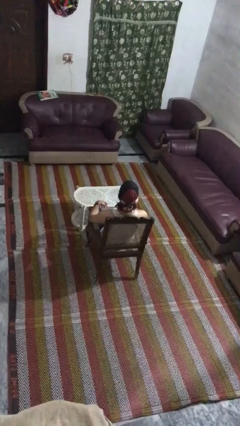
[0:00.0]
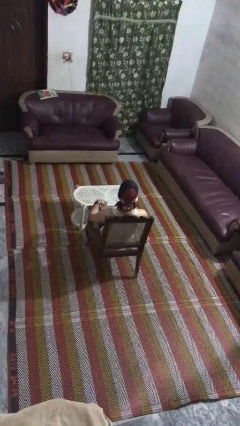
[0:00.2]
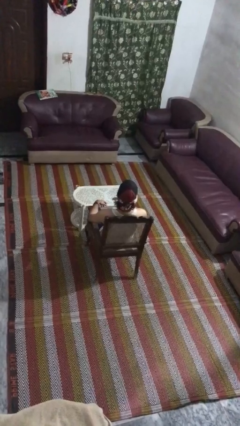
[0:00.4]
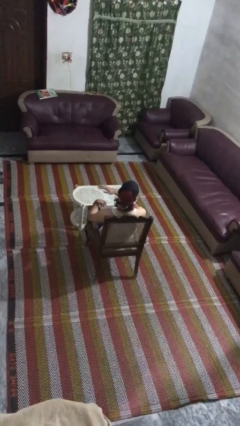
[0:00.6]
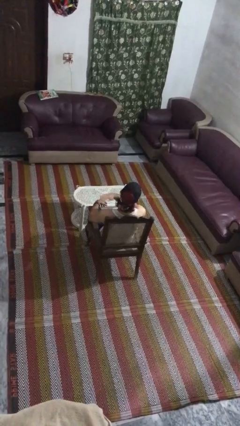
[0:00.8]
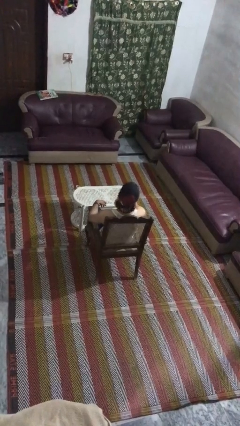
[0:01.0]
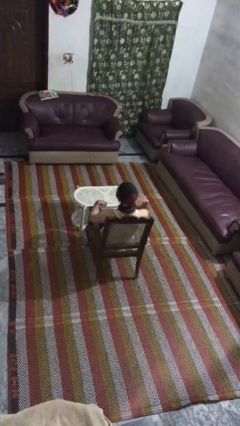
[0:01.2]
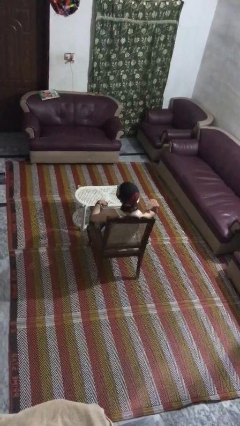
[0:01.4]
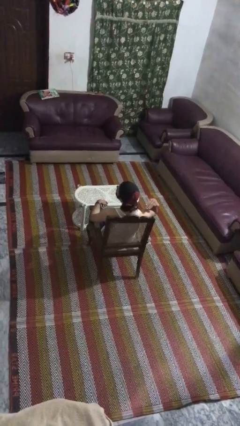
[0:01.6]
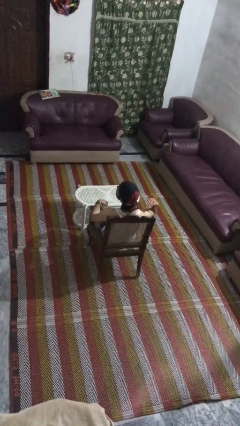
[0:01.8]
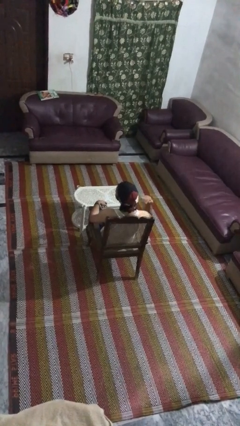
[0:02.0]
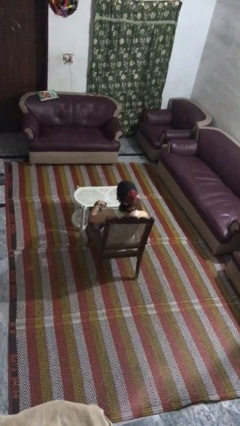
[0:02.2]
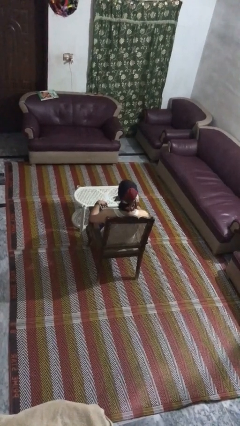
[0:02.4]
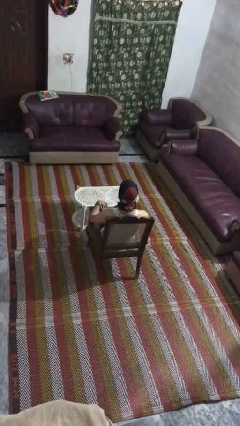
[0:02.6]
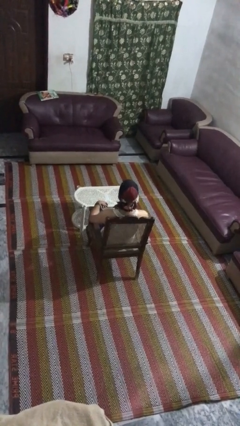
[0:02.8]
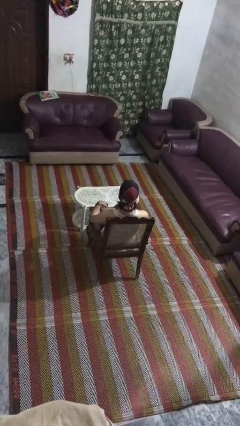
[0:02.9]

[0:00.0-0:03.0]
person gestures cut

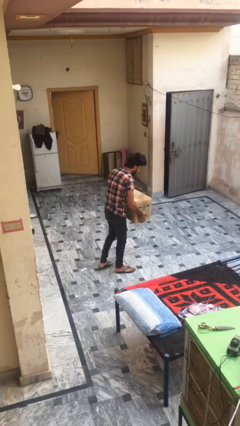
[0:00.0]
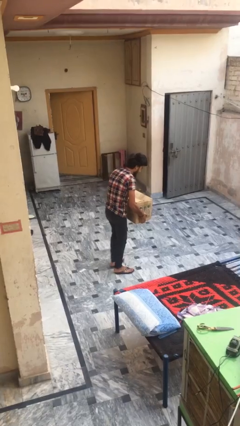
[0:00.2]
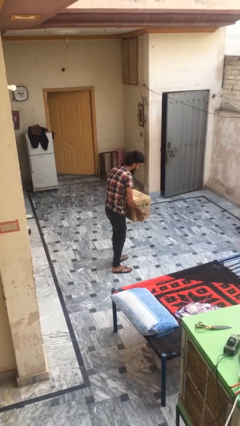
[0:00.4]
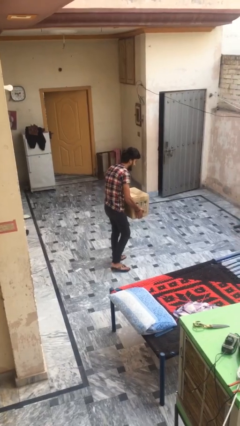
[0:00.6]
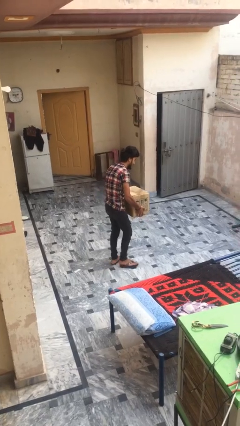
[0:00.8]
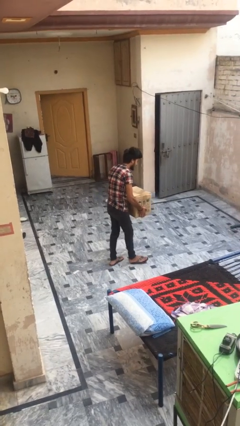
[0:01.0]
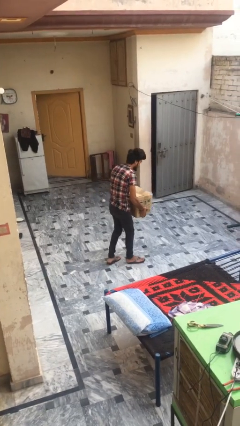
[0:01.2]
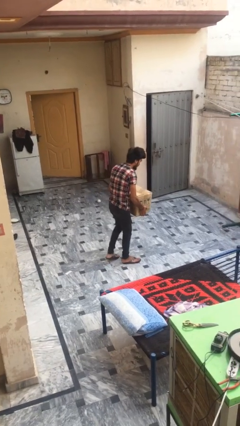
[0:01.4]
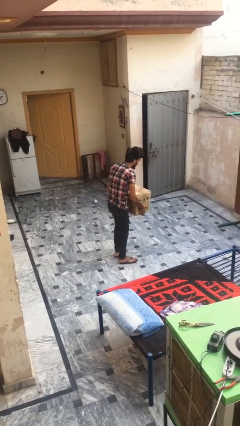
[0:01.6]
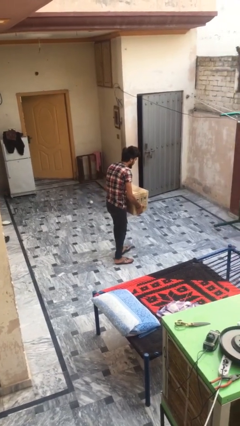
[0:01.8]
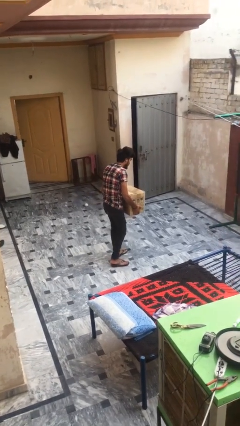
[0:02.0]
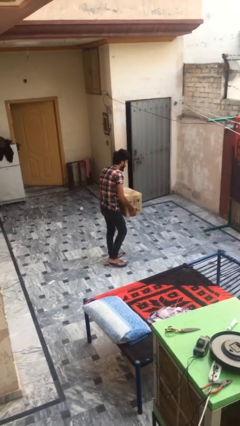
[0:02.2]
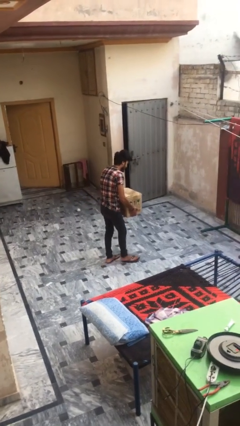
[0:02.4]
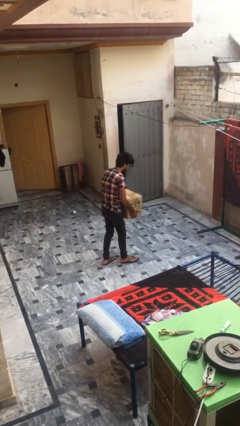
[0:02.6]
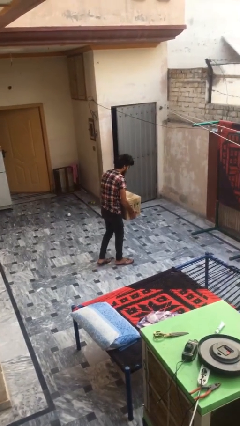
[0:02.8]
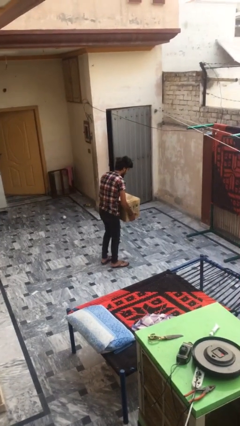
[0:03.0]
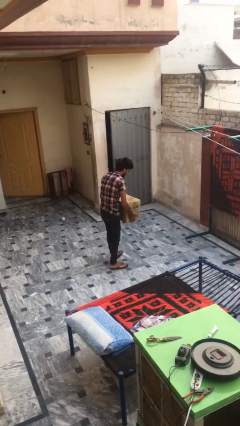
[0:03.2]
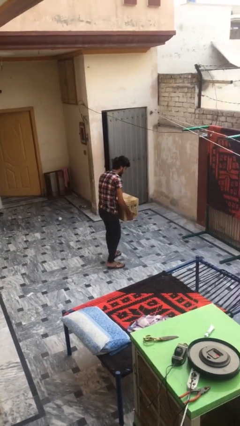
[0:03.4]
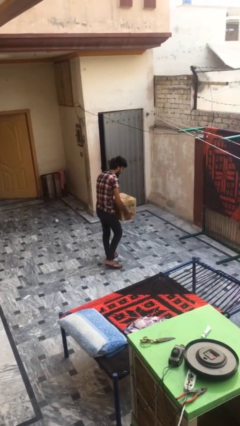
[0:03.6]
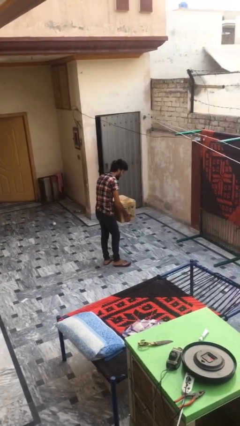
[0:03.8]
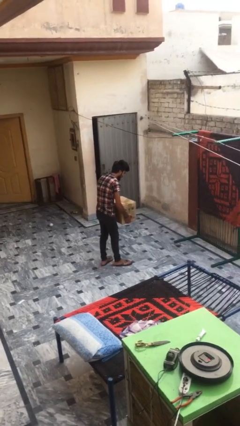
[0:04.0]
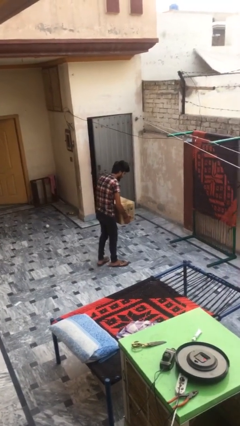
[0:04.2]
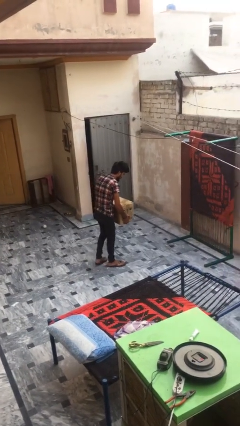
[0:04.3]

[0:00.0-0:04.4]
person carries heavy object

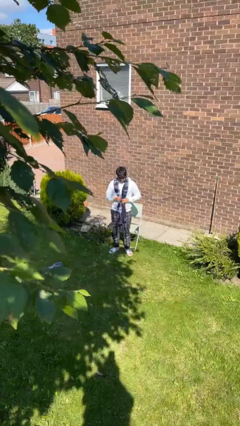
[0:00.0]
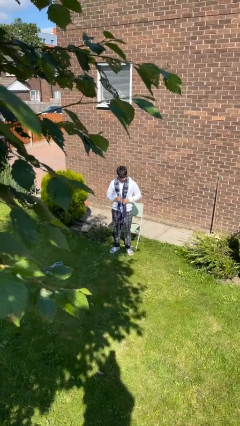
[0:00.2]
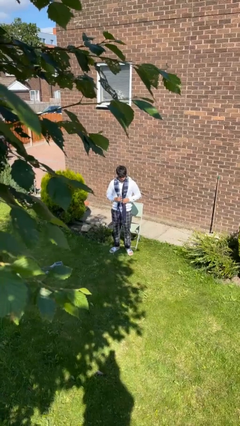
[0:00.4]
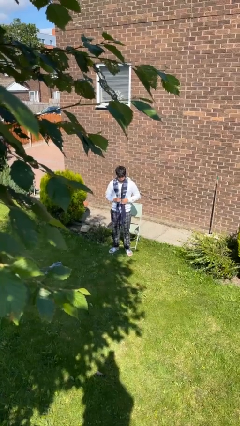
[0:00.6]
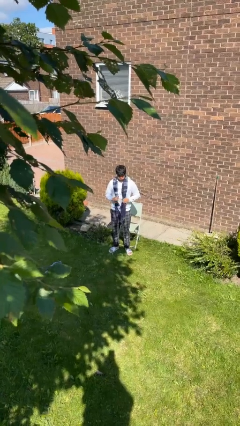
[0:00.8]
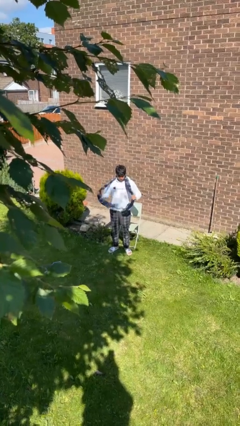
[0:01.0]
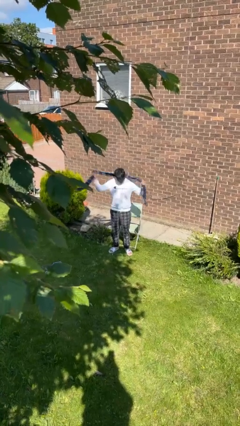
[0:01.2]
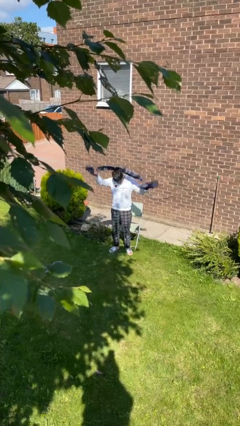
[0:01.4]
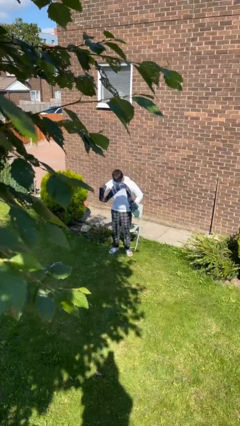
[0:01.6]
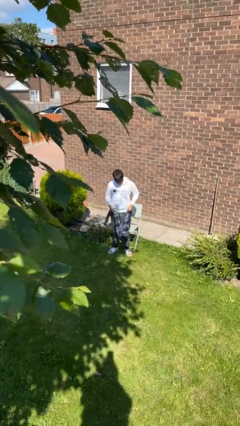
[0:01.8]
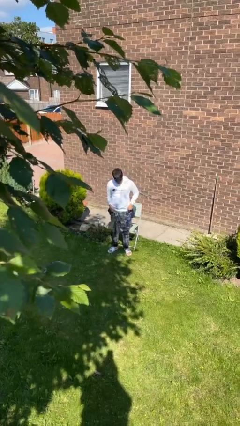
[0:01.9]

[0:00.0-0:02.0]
person takes off scarf

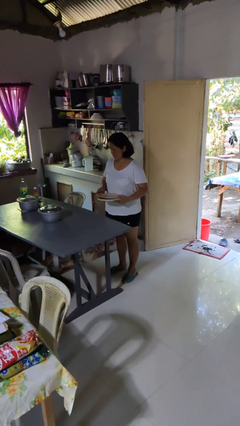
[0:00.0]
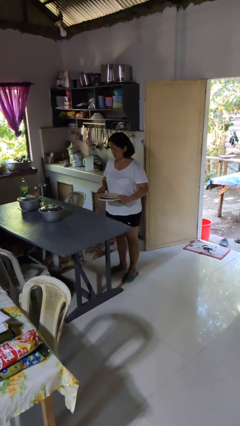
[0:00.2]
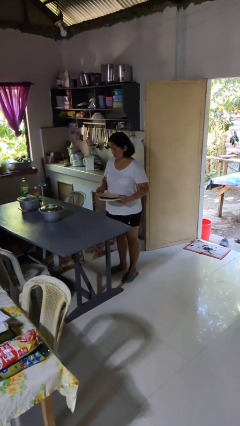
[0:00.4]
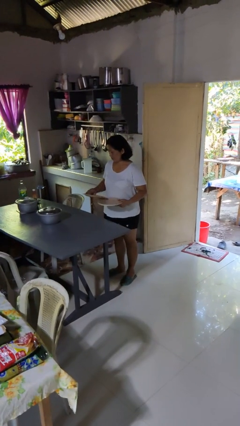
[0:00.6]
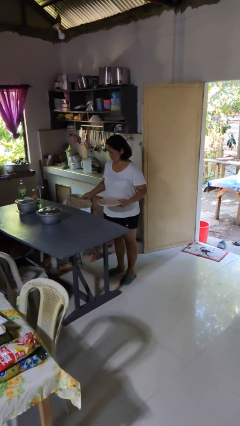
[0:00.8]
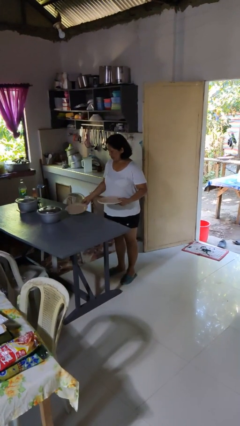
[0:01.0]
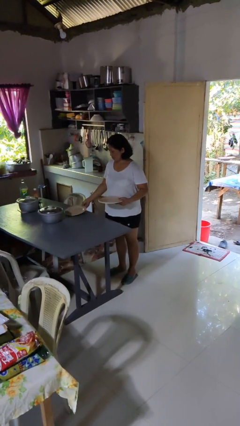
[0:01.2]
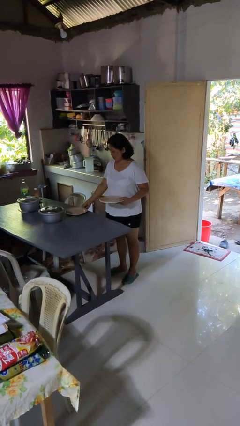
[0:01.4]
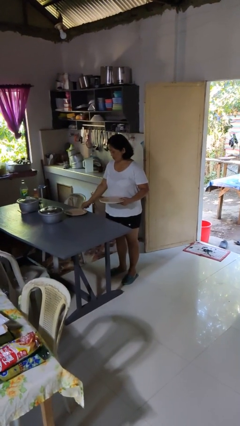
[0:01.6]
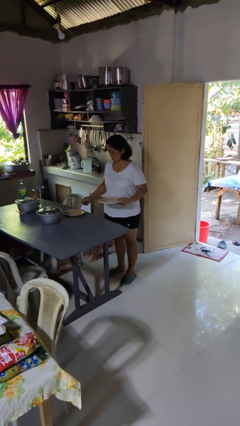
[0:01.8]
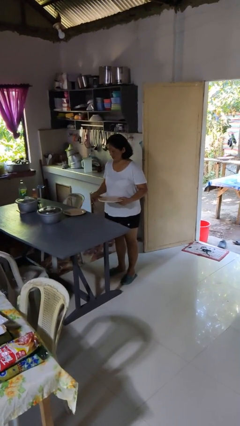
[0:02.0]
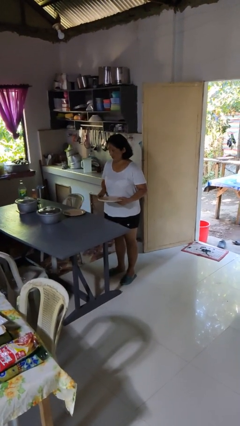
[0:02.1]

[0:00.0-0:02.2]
person sets table

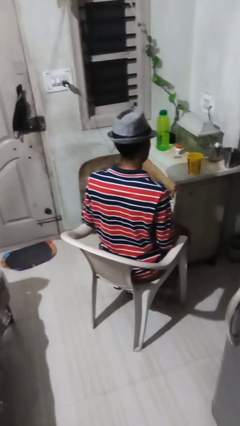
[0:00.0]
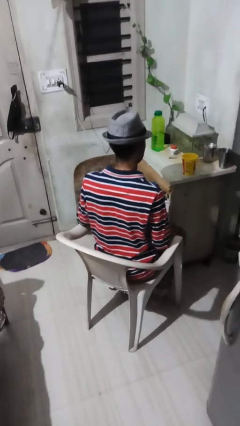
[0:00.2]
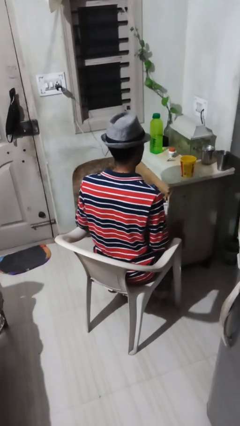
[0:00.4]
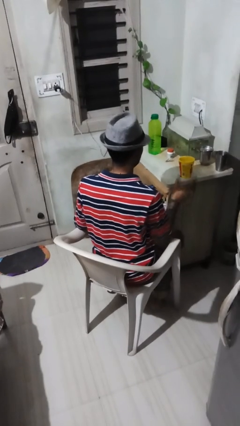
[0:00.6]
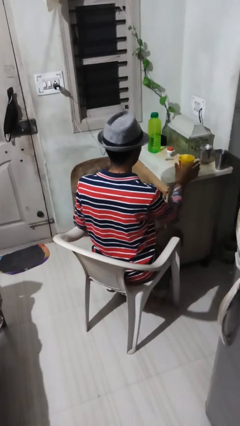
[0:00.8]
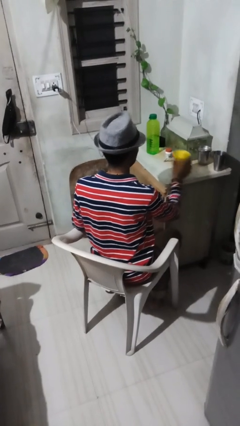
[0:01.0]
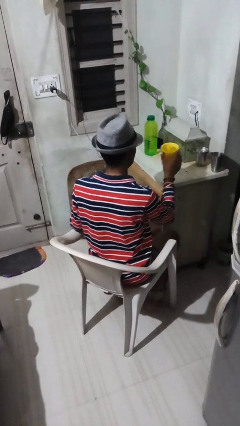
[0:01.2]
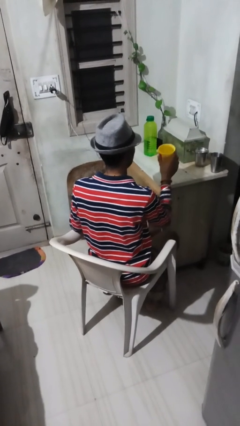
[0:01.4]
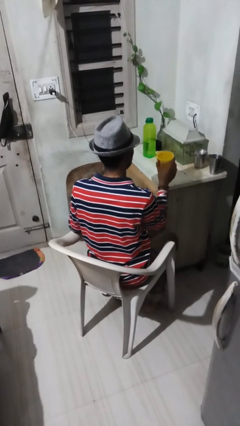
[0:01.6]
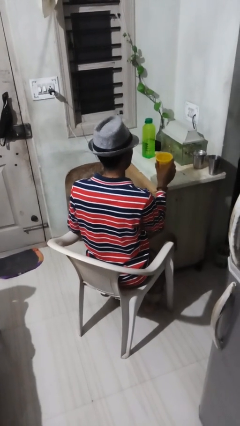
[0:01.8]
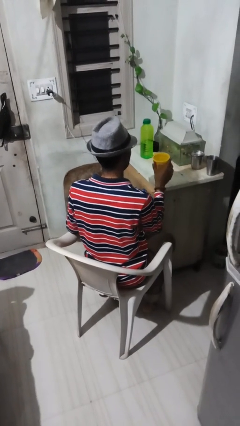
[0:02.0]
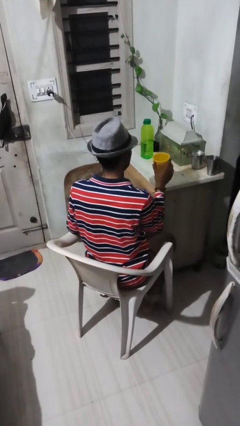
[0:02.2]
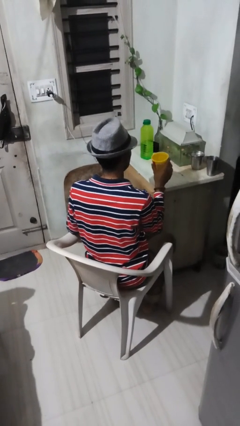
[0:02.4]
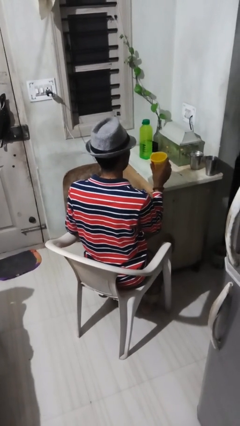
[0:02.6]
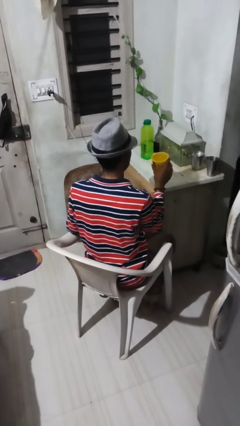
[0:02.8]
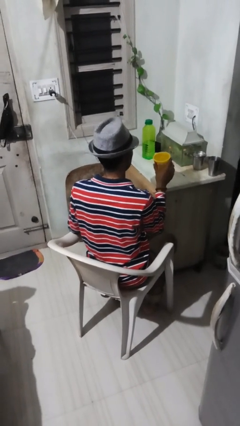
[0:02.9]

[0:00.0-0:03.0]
person picks up object from table

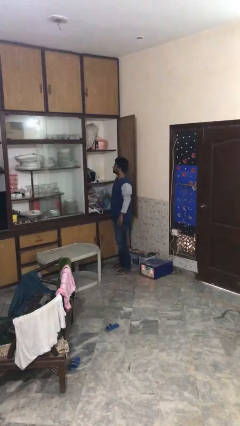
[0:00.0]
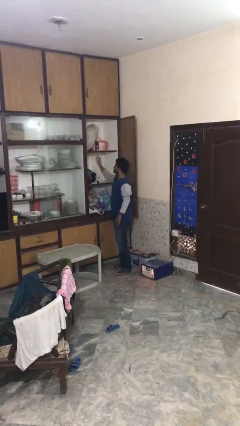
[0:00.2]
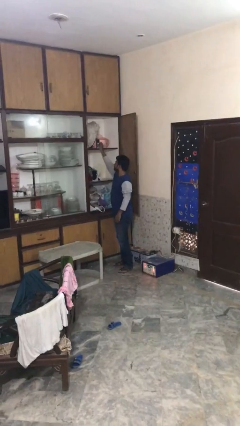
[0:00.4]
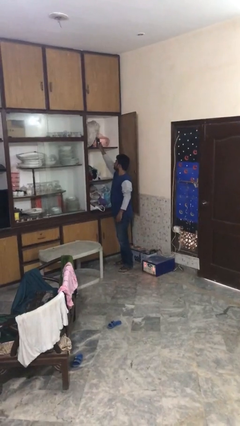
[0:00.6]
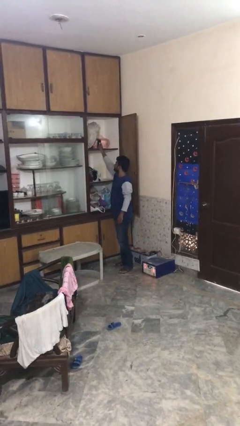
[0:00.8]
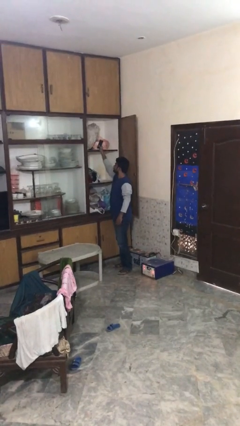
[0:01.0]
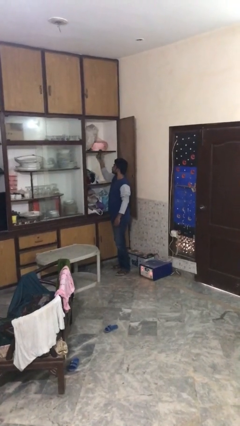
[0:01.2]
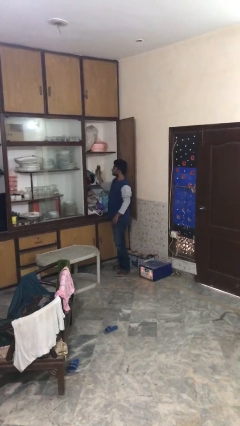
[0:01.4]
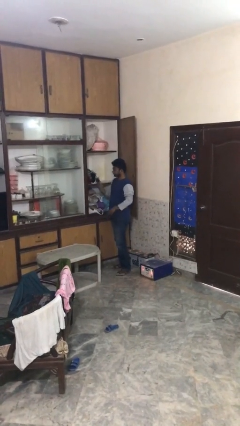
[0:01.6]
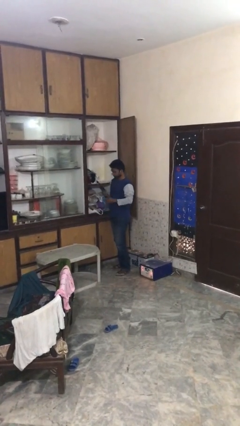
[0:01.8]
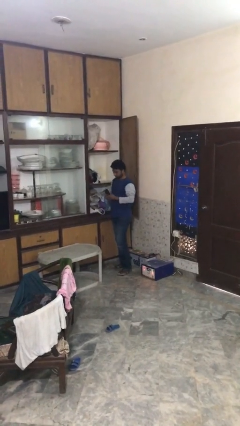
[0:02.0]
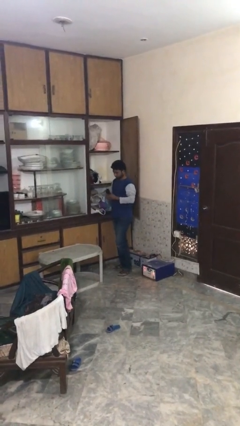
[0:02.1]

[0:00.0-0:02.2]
person picks up object from shelf

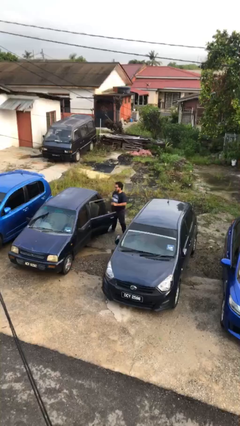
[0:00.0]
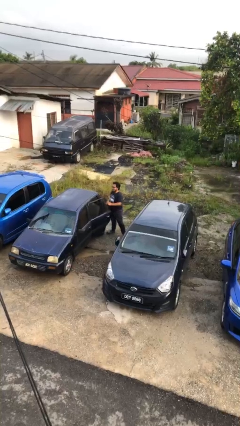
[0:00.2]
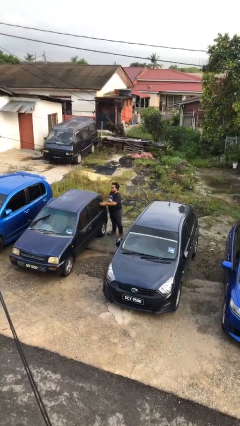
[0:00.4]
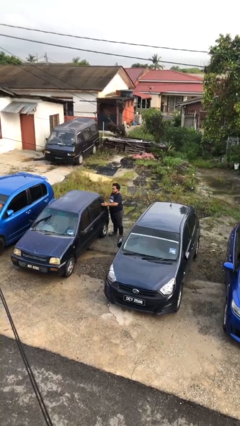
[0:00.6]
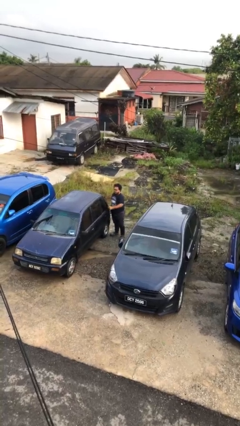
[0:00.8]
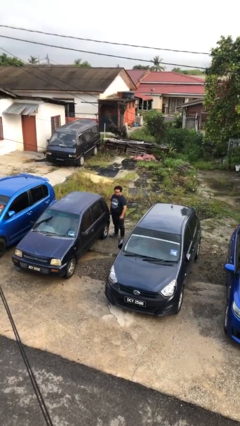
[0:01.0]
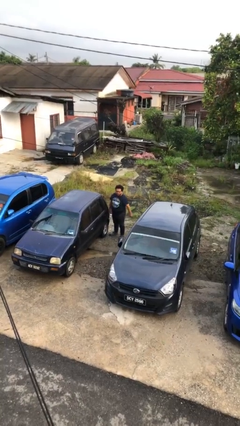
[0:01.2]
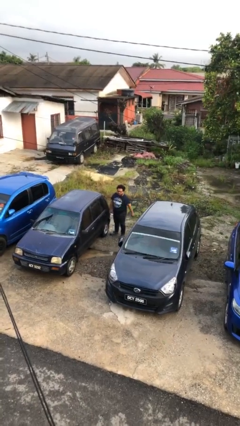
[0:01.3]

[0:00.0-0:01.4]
person closes car door
